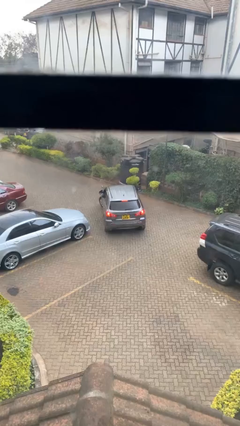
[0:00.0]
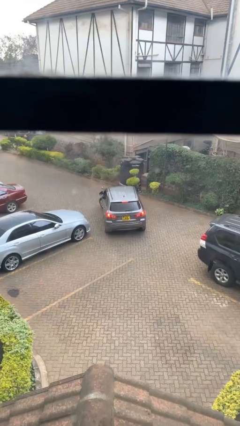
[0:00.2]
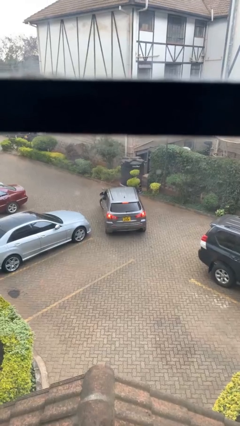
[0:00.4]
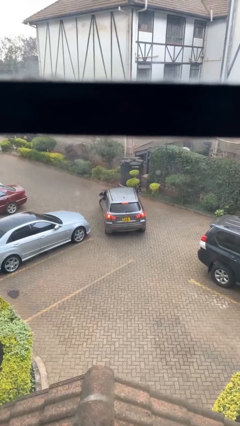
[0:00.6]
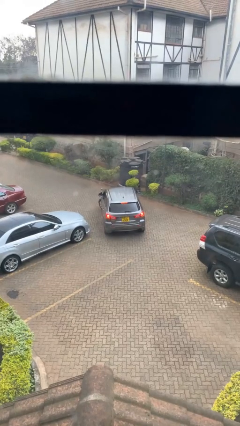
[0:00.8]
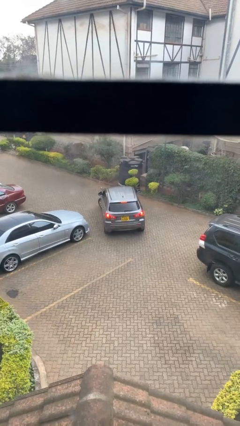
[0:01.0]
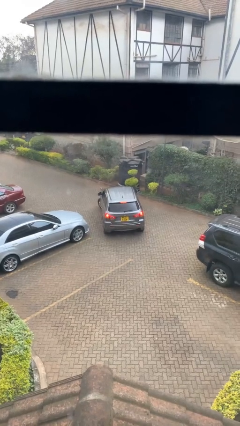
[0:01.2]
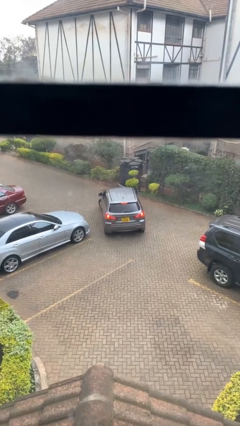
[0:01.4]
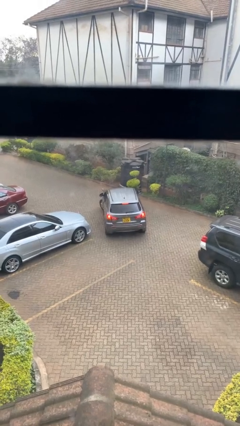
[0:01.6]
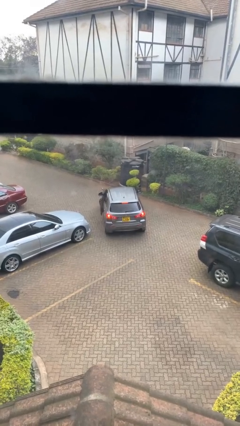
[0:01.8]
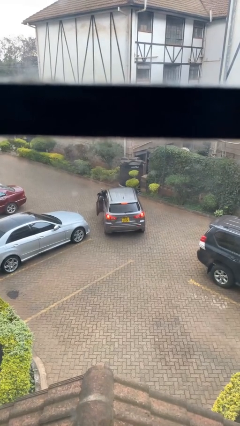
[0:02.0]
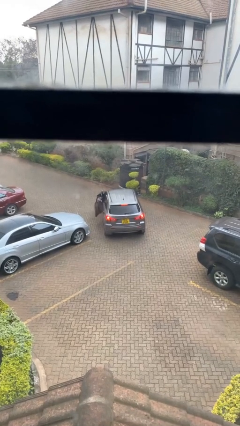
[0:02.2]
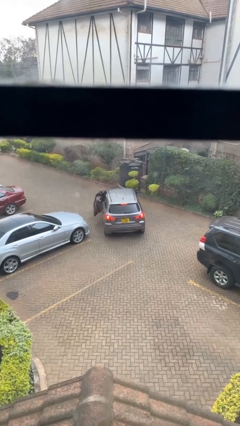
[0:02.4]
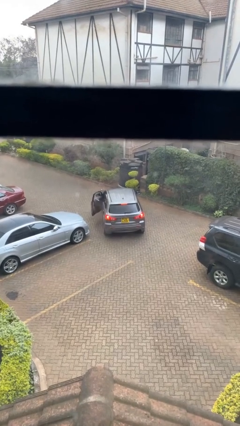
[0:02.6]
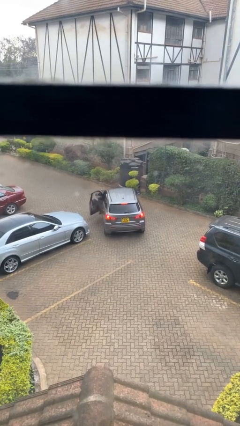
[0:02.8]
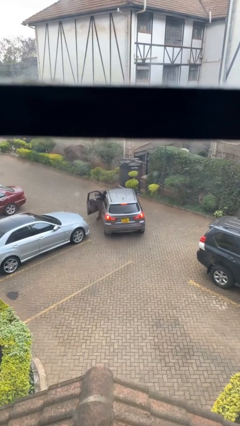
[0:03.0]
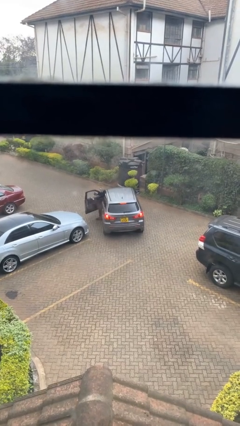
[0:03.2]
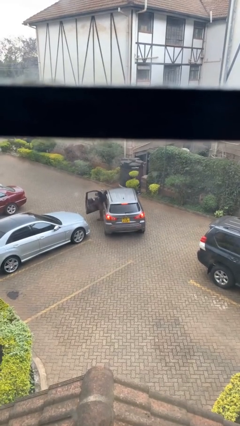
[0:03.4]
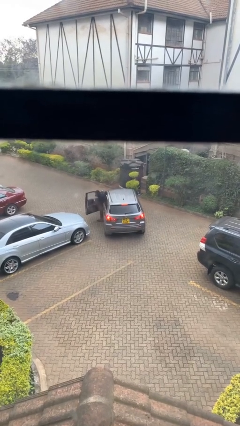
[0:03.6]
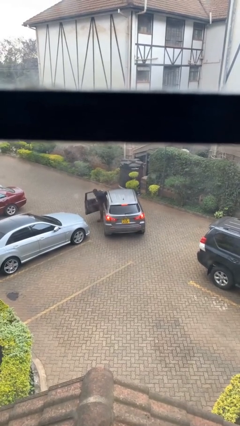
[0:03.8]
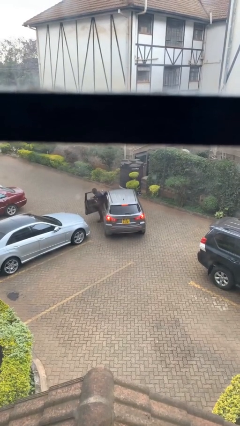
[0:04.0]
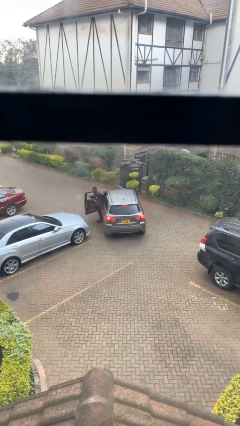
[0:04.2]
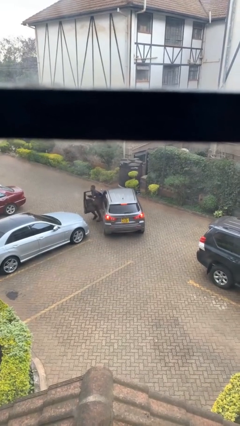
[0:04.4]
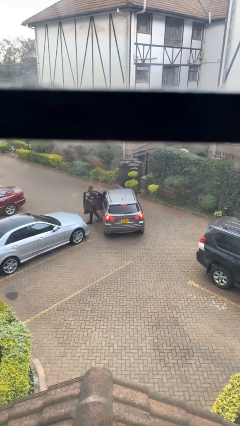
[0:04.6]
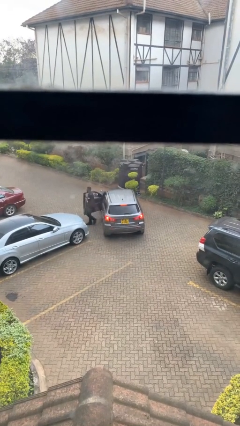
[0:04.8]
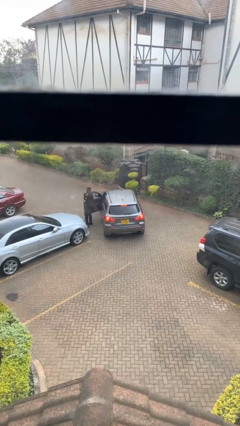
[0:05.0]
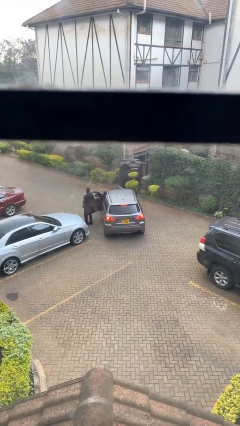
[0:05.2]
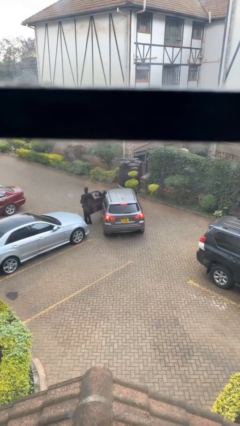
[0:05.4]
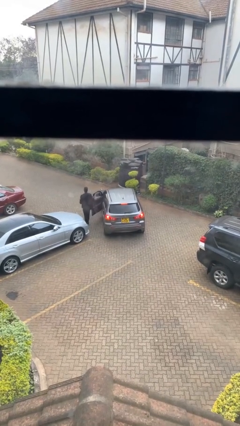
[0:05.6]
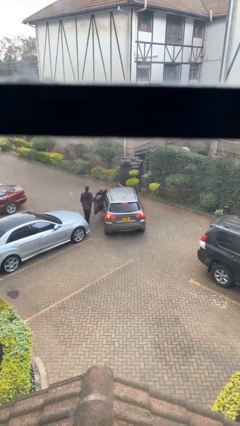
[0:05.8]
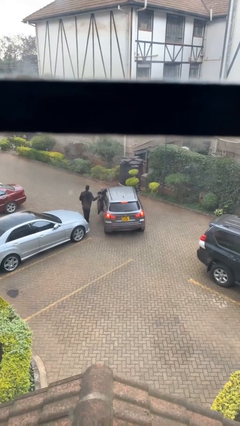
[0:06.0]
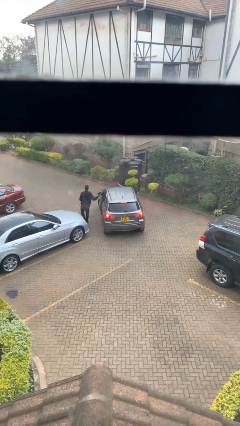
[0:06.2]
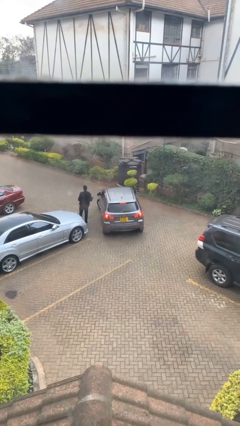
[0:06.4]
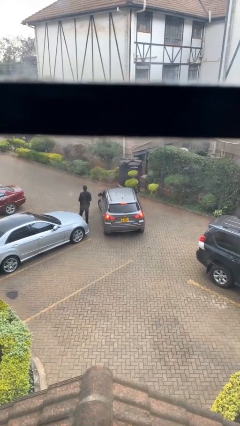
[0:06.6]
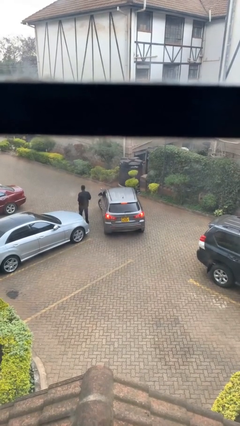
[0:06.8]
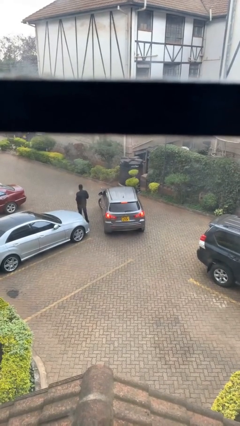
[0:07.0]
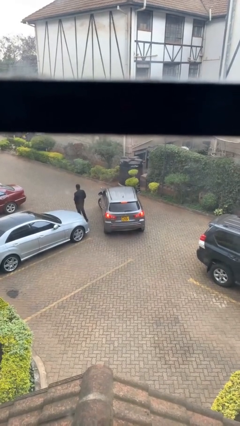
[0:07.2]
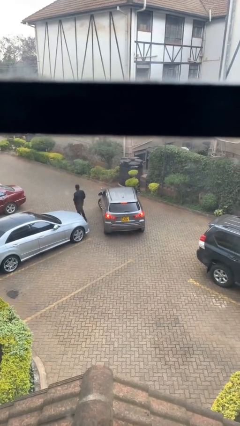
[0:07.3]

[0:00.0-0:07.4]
car drops off person

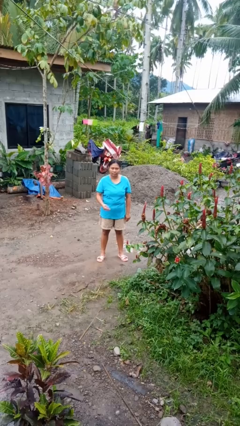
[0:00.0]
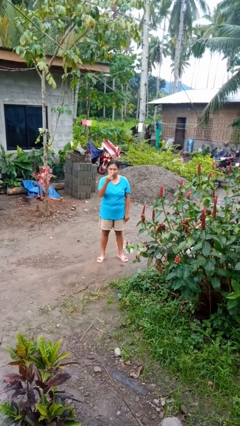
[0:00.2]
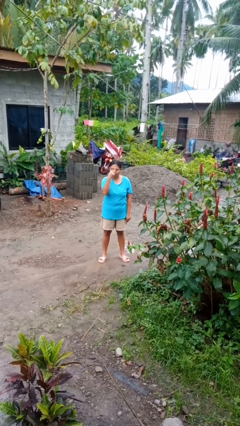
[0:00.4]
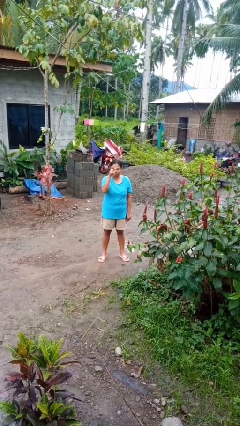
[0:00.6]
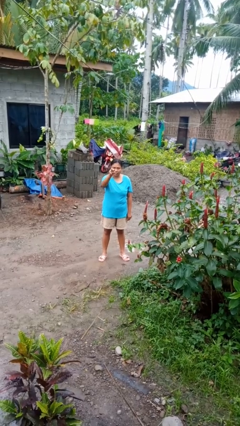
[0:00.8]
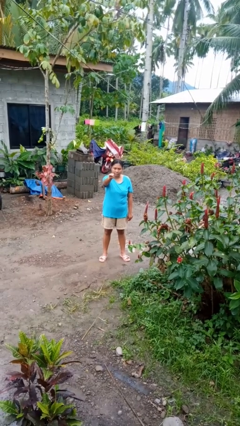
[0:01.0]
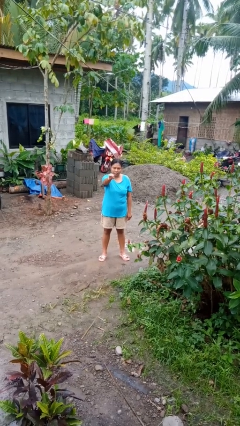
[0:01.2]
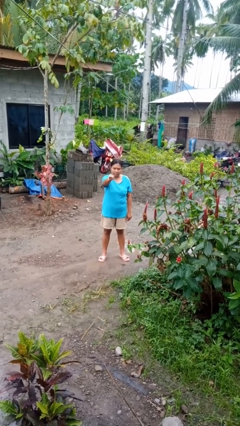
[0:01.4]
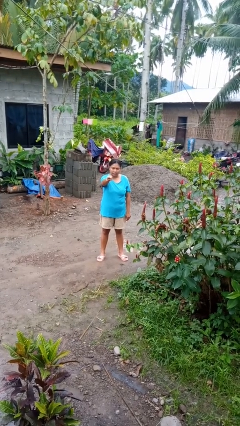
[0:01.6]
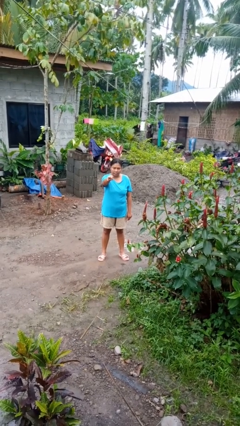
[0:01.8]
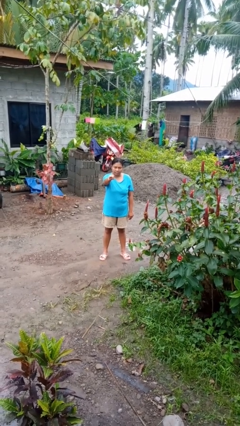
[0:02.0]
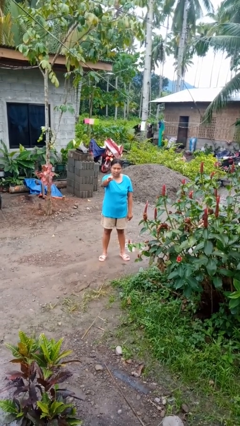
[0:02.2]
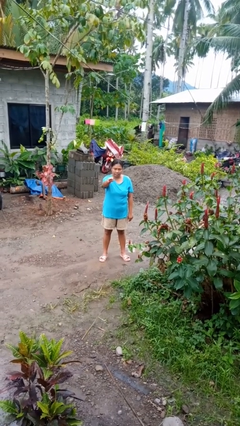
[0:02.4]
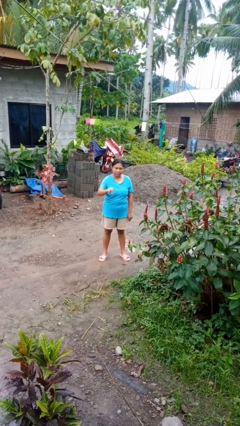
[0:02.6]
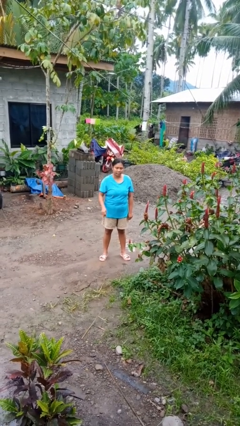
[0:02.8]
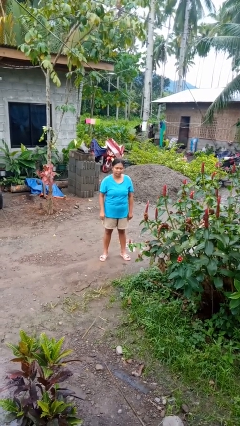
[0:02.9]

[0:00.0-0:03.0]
person gestures watch closely

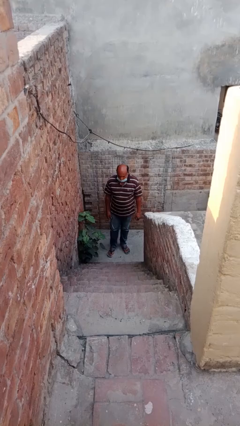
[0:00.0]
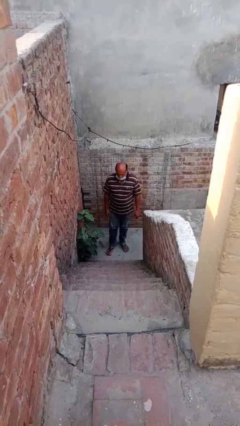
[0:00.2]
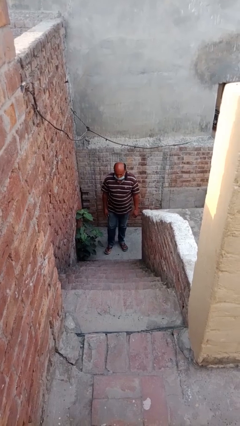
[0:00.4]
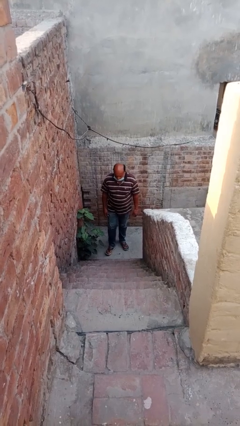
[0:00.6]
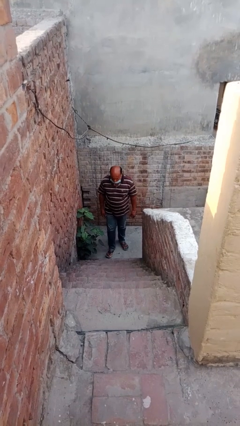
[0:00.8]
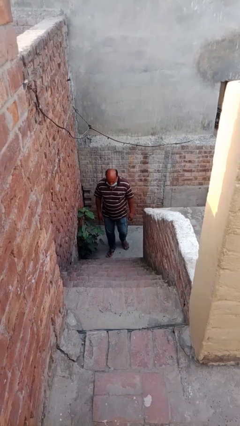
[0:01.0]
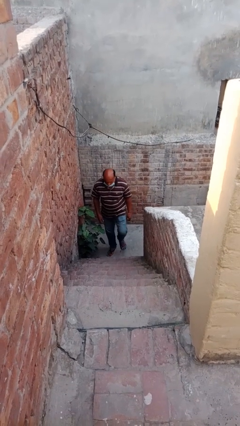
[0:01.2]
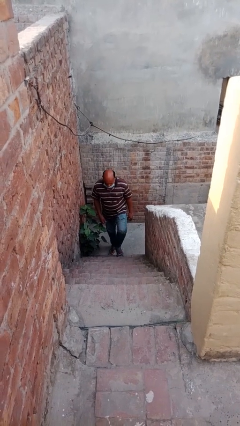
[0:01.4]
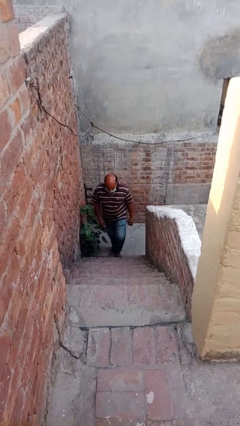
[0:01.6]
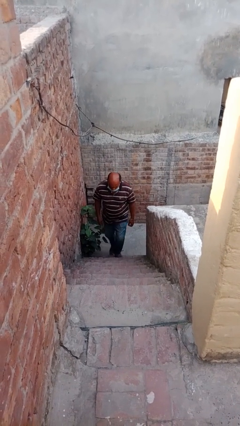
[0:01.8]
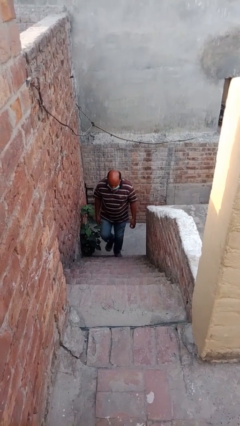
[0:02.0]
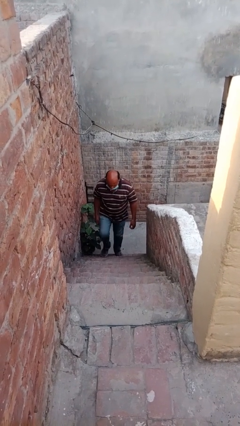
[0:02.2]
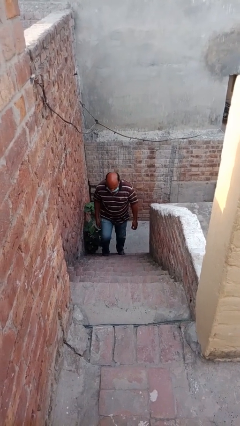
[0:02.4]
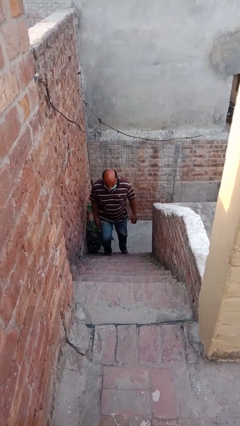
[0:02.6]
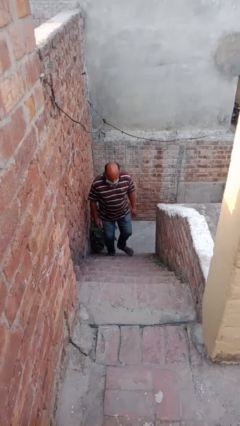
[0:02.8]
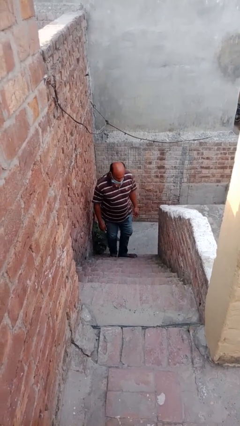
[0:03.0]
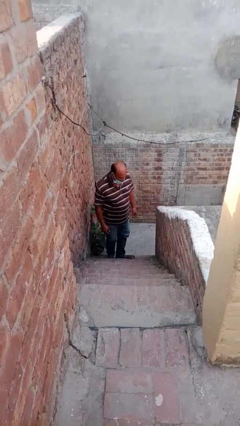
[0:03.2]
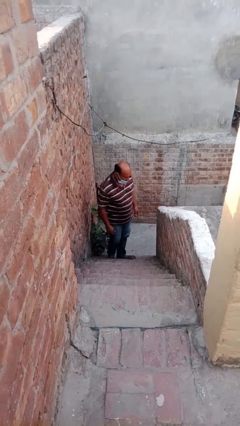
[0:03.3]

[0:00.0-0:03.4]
person climbs up stairs

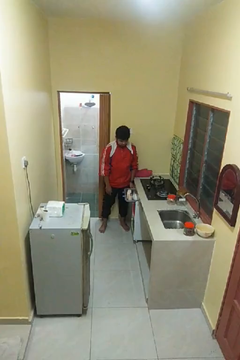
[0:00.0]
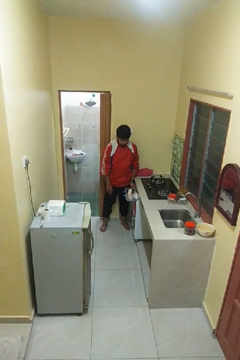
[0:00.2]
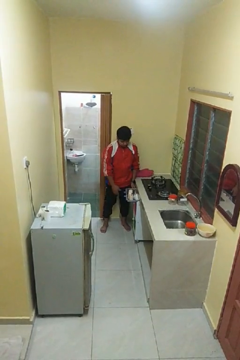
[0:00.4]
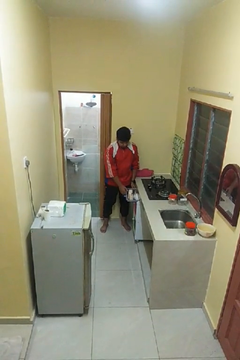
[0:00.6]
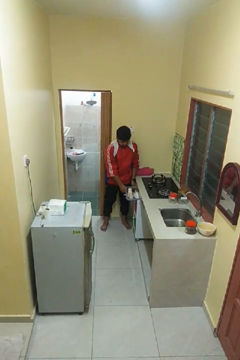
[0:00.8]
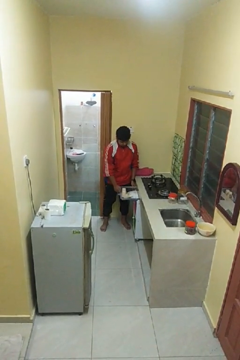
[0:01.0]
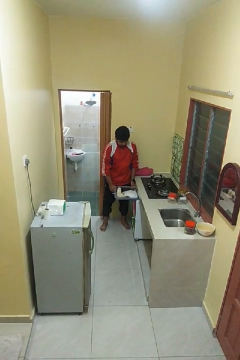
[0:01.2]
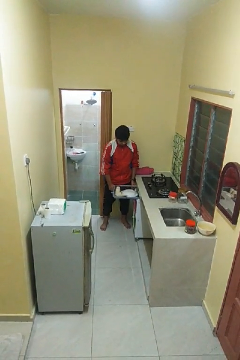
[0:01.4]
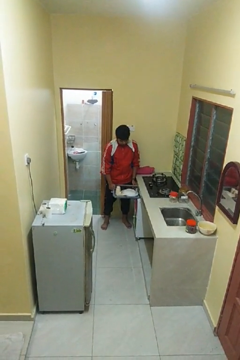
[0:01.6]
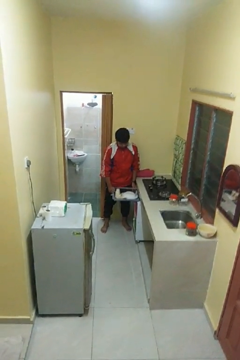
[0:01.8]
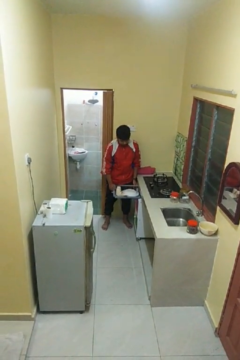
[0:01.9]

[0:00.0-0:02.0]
person opens kitchen drawer

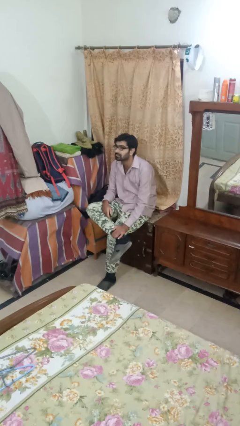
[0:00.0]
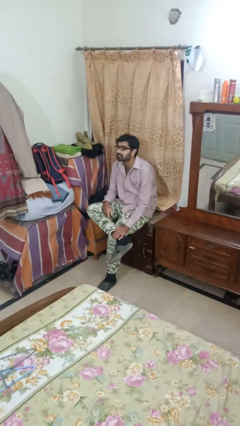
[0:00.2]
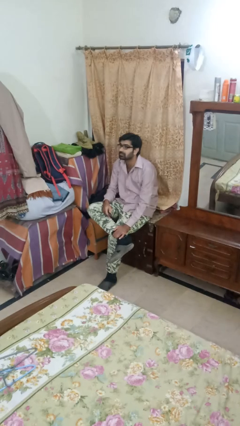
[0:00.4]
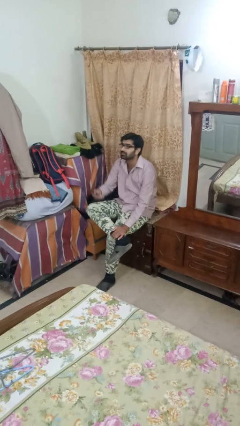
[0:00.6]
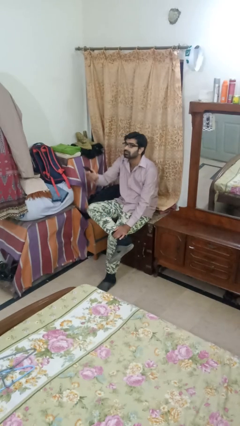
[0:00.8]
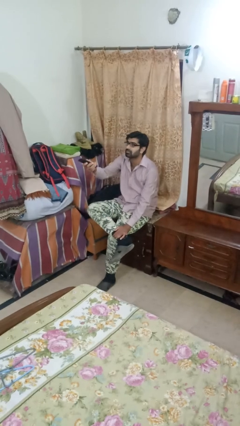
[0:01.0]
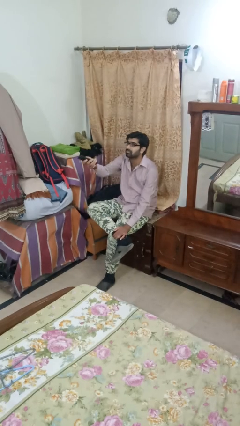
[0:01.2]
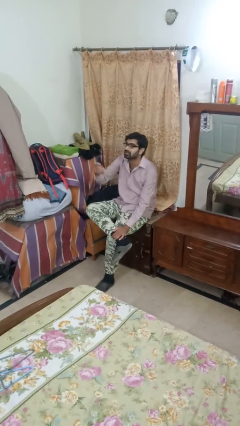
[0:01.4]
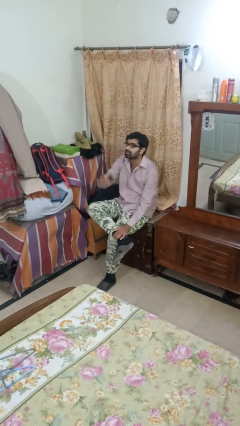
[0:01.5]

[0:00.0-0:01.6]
person uses television remote

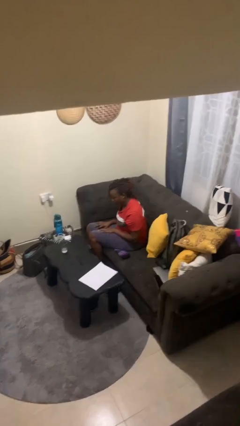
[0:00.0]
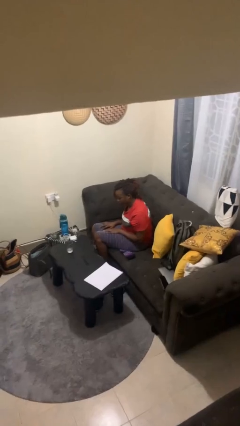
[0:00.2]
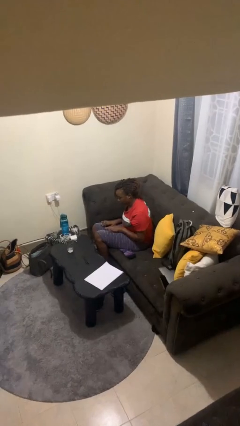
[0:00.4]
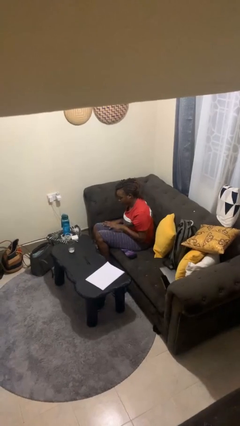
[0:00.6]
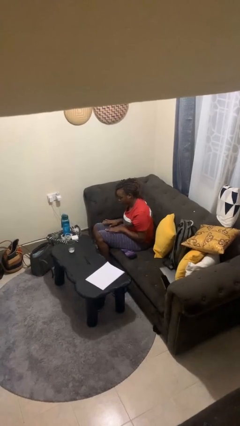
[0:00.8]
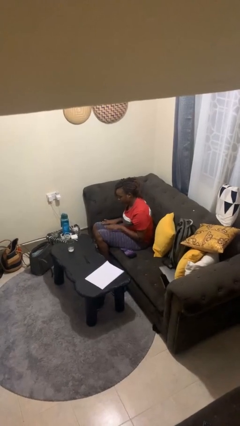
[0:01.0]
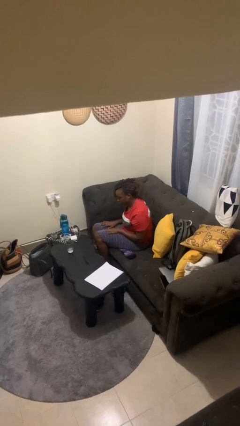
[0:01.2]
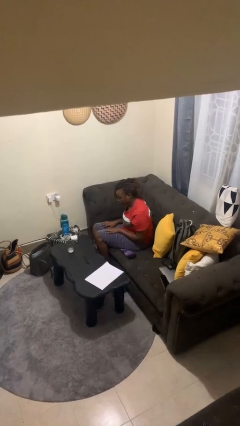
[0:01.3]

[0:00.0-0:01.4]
person slaps hands on thighs
